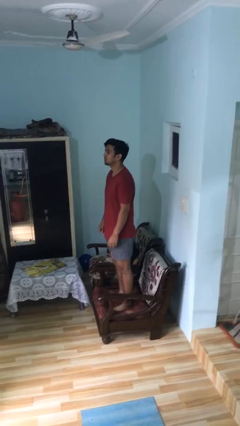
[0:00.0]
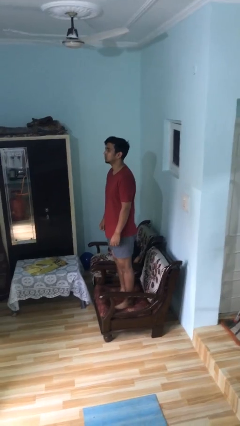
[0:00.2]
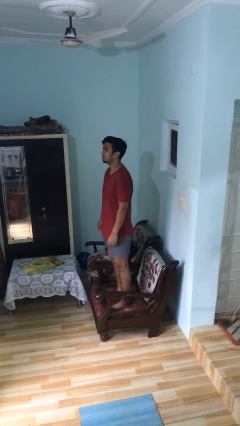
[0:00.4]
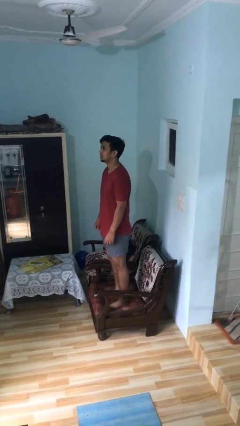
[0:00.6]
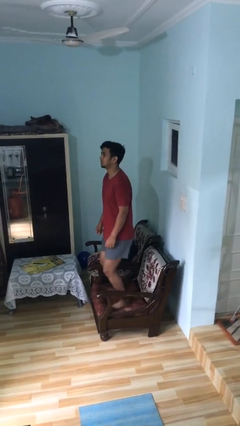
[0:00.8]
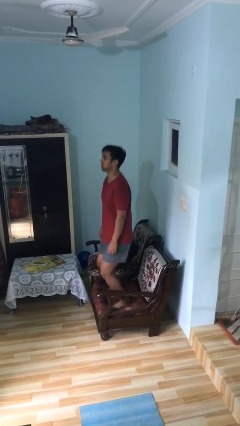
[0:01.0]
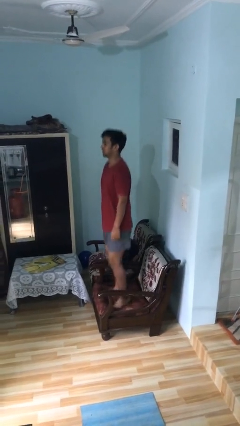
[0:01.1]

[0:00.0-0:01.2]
person jumps on couch

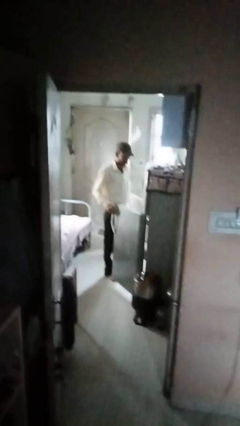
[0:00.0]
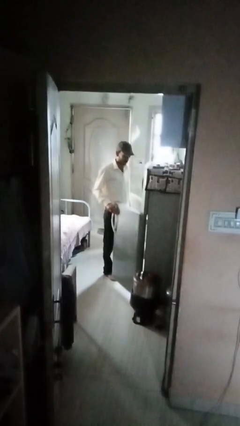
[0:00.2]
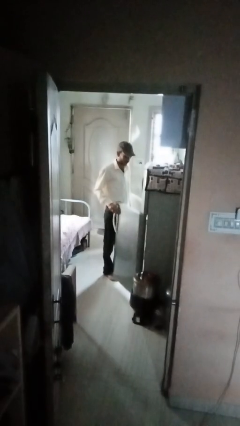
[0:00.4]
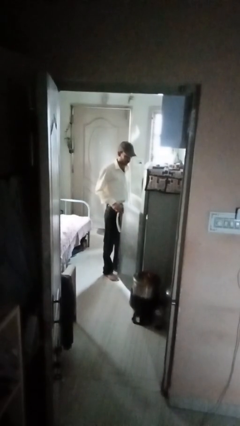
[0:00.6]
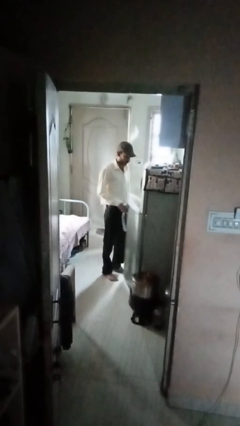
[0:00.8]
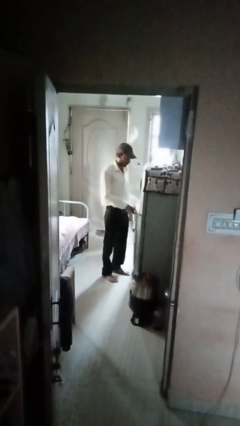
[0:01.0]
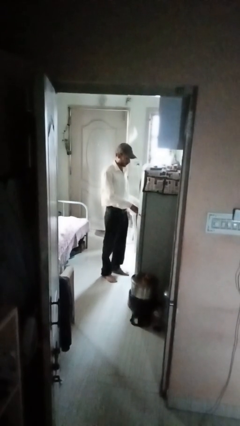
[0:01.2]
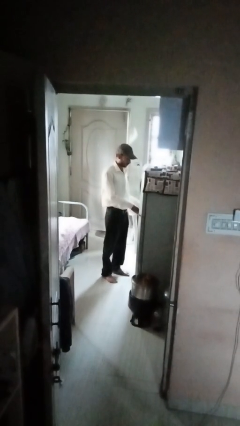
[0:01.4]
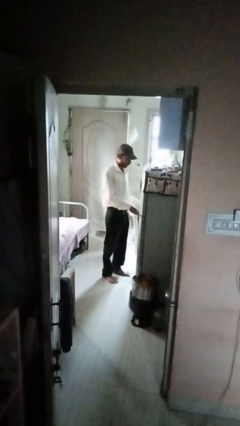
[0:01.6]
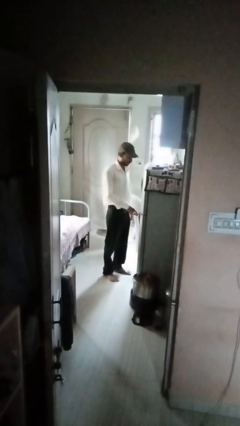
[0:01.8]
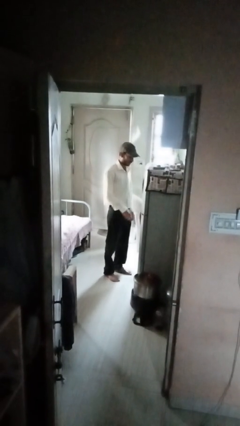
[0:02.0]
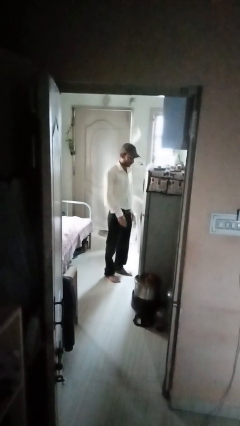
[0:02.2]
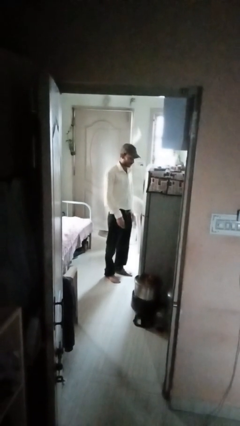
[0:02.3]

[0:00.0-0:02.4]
person closes refrigerator

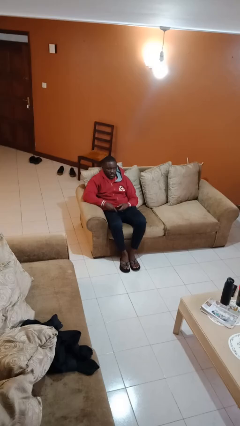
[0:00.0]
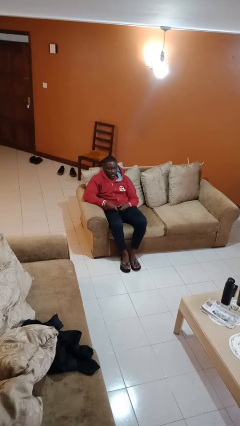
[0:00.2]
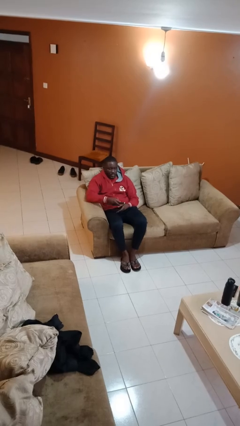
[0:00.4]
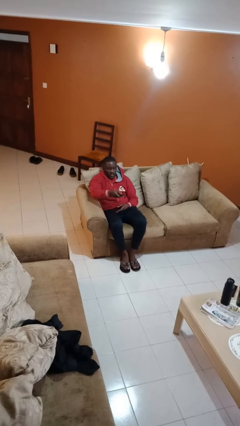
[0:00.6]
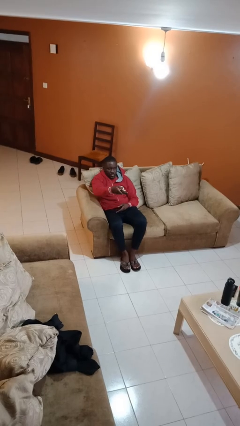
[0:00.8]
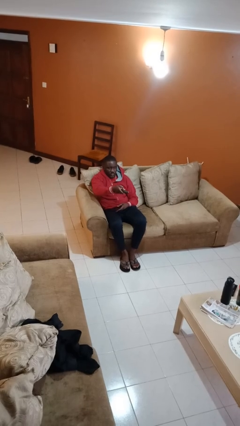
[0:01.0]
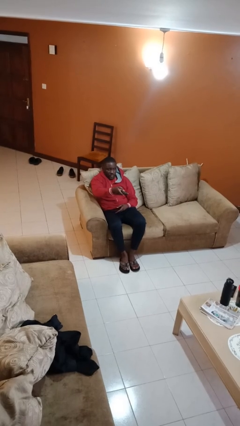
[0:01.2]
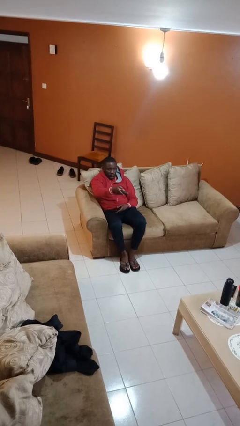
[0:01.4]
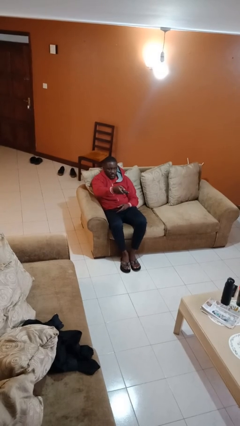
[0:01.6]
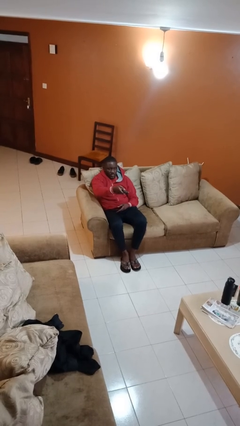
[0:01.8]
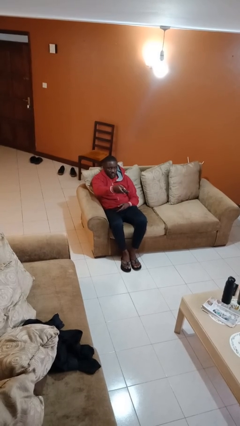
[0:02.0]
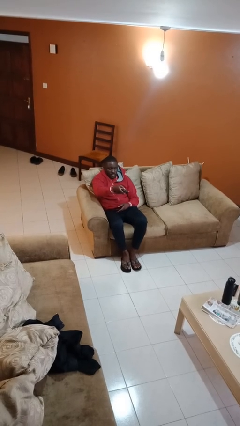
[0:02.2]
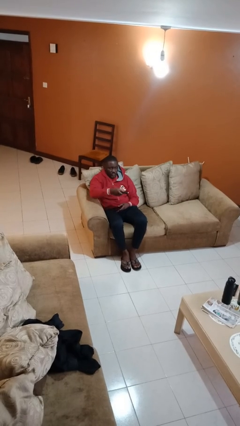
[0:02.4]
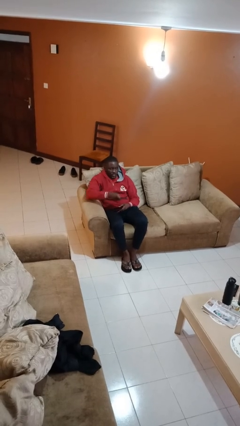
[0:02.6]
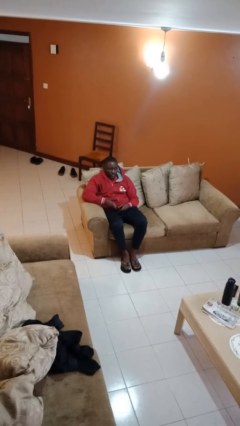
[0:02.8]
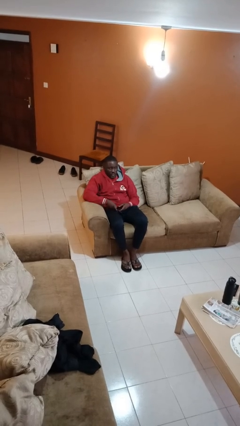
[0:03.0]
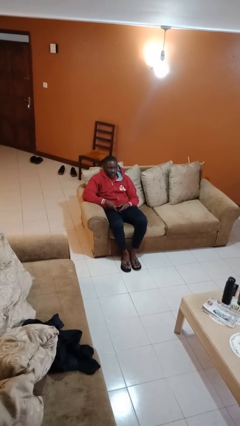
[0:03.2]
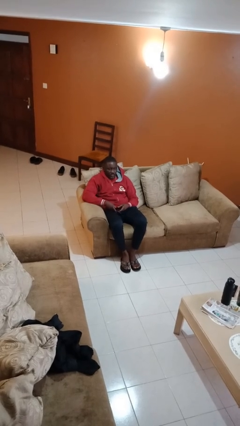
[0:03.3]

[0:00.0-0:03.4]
person uses television remote

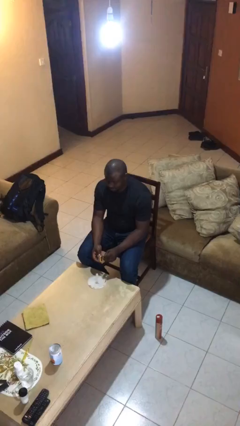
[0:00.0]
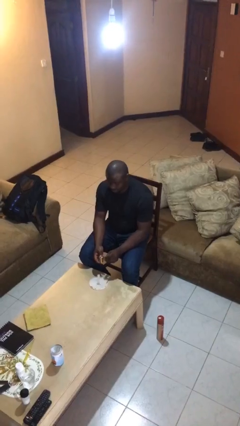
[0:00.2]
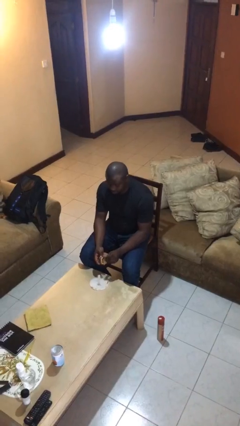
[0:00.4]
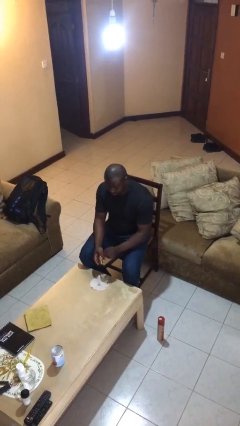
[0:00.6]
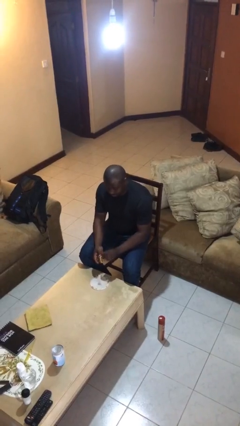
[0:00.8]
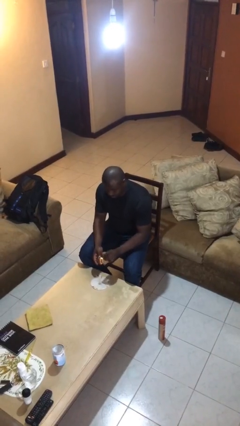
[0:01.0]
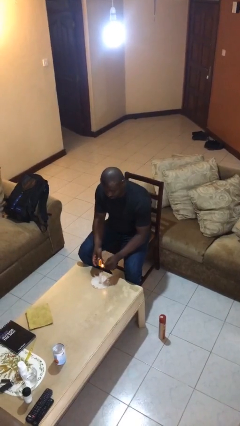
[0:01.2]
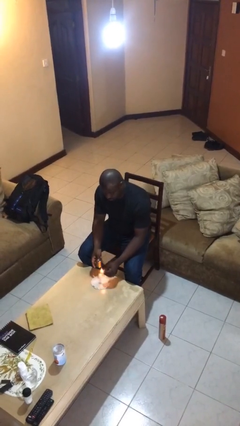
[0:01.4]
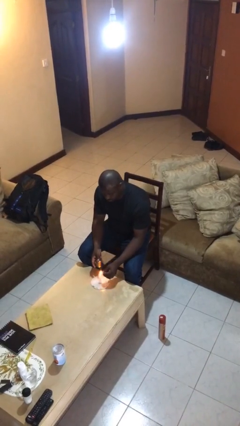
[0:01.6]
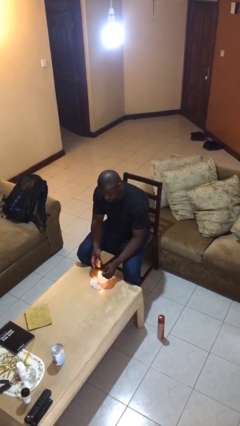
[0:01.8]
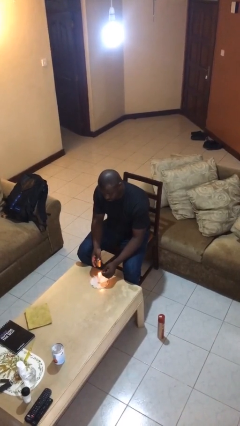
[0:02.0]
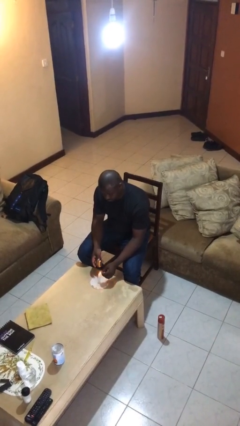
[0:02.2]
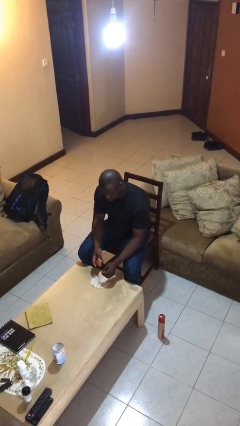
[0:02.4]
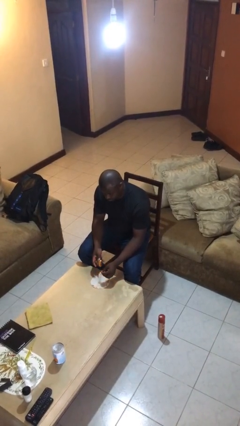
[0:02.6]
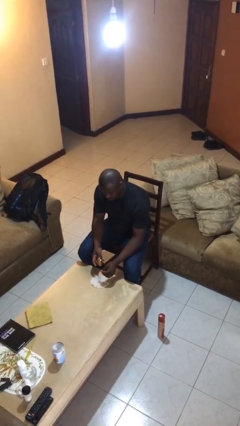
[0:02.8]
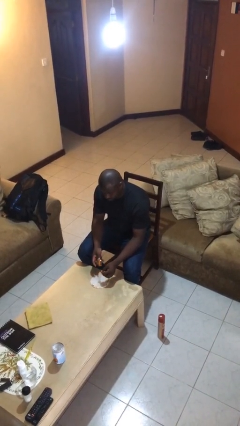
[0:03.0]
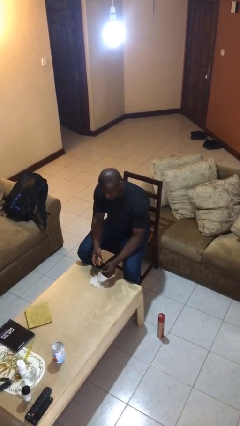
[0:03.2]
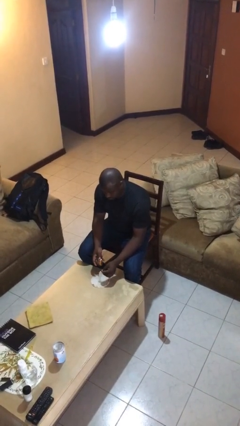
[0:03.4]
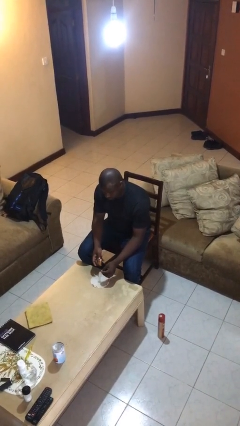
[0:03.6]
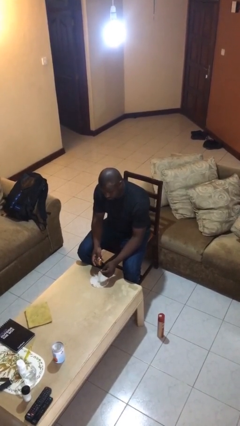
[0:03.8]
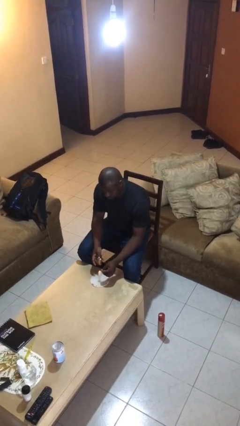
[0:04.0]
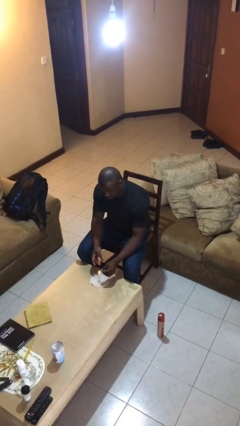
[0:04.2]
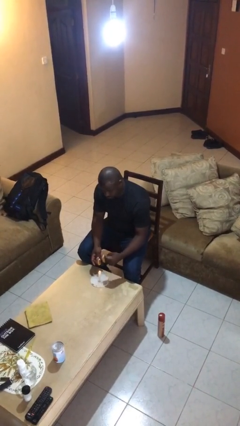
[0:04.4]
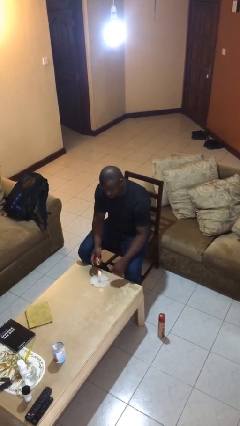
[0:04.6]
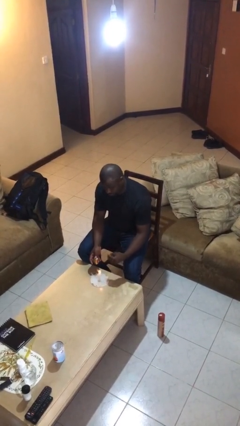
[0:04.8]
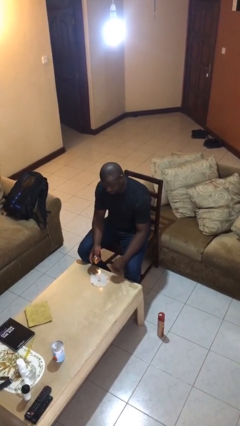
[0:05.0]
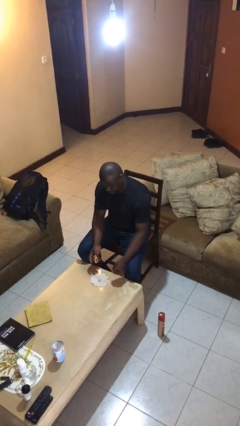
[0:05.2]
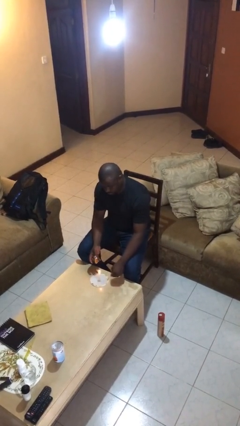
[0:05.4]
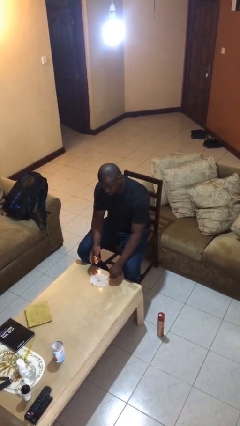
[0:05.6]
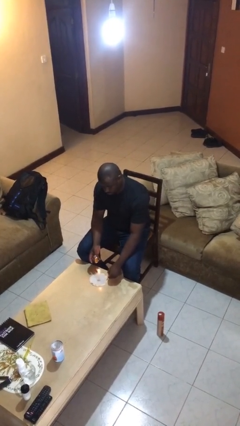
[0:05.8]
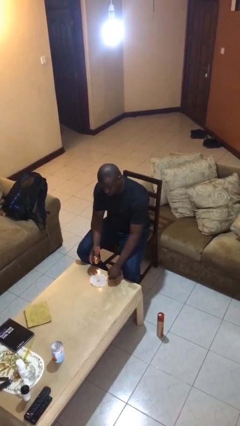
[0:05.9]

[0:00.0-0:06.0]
person lights candle

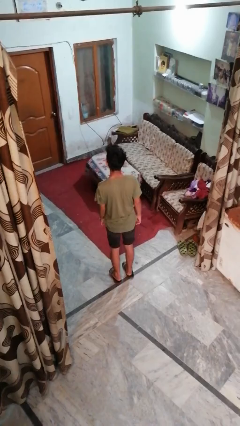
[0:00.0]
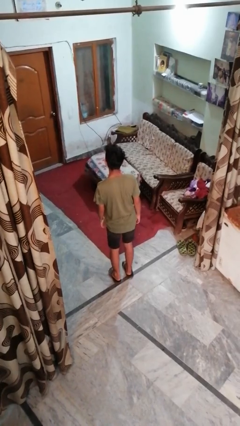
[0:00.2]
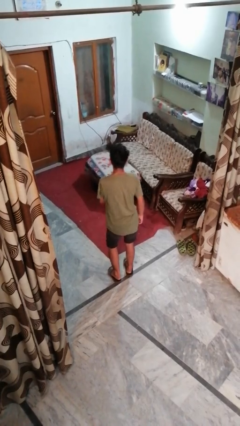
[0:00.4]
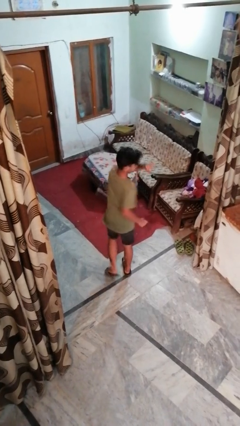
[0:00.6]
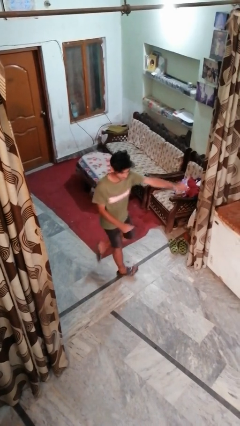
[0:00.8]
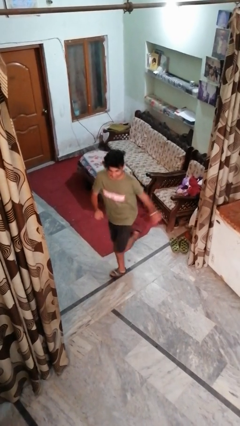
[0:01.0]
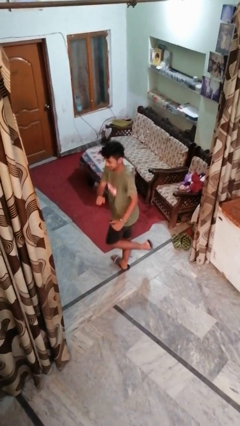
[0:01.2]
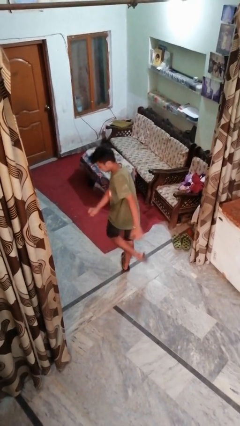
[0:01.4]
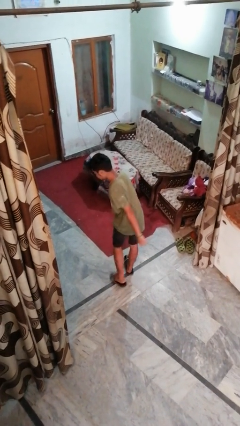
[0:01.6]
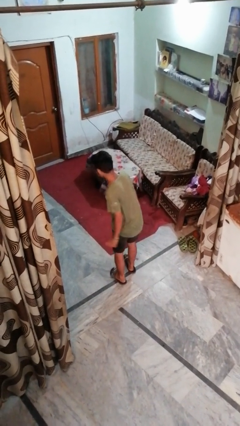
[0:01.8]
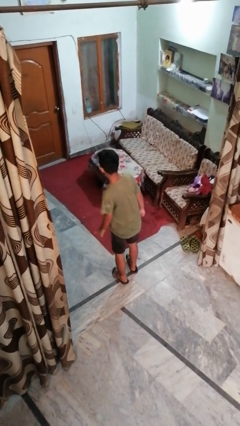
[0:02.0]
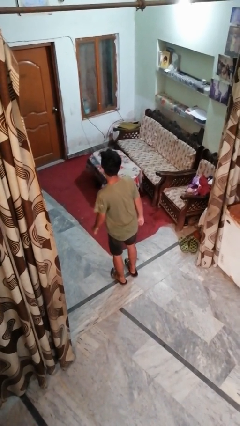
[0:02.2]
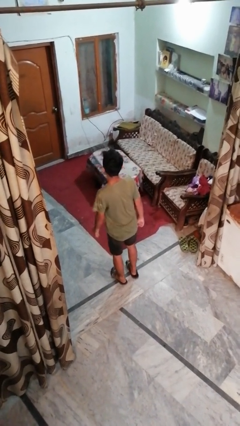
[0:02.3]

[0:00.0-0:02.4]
person twirls

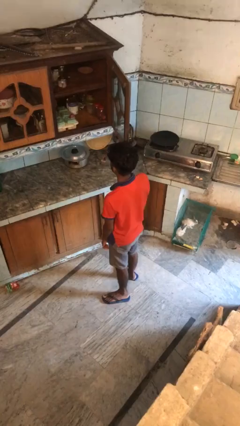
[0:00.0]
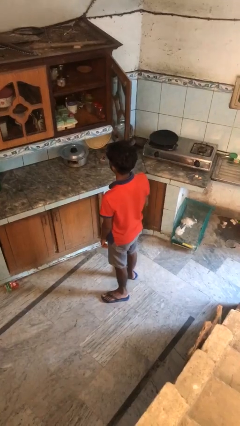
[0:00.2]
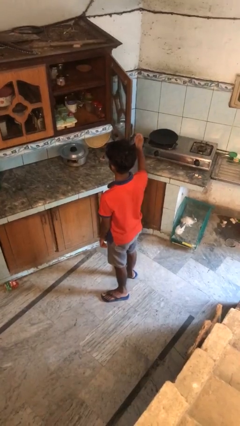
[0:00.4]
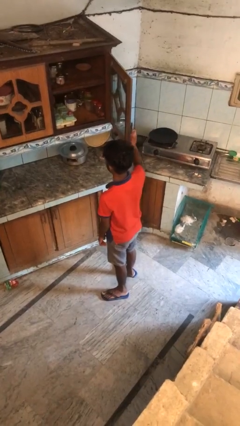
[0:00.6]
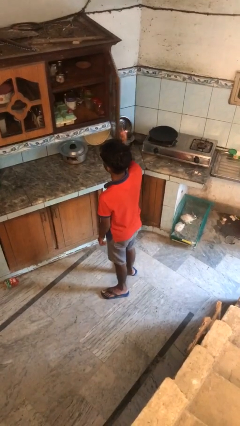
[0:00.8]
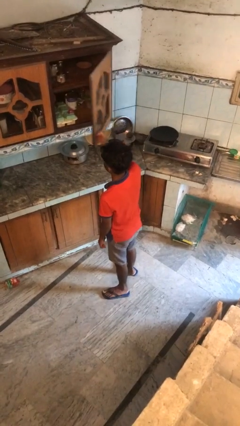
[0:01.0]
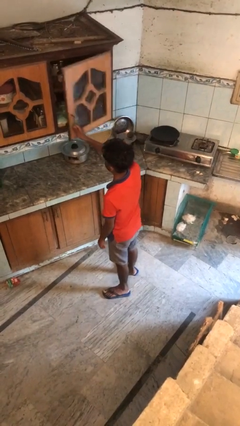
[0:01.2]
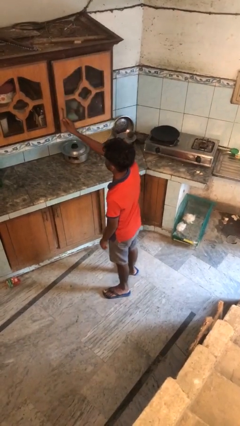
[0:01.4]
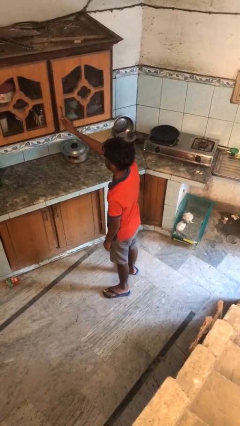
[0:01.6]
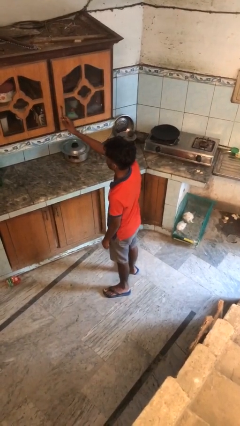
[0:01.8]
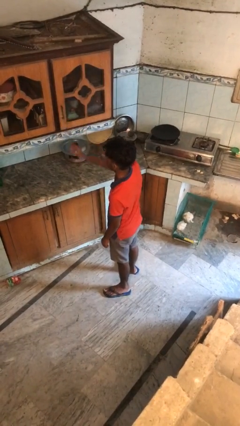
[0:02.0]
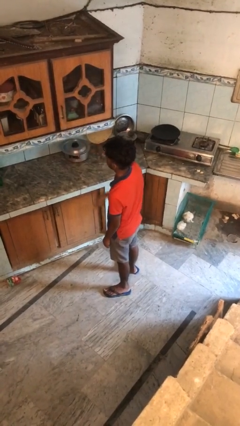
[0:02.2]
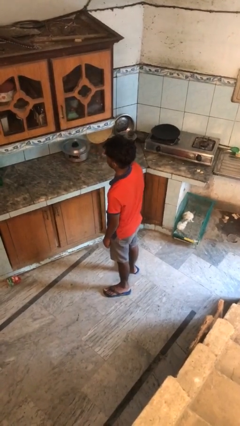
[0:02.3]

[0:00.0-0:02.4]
person closes cabinet
